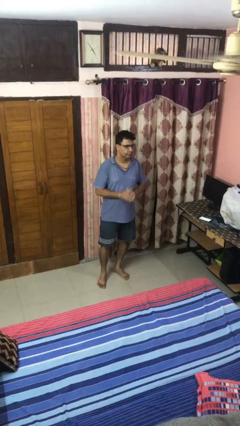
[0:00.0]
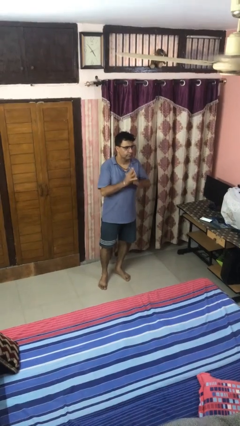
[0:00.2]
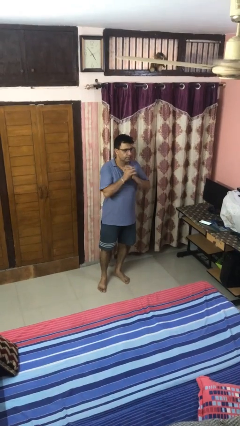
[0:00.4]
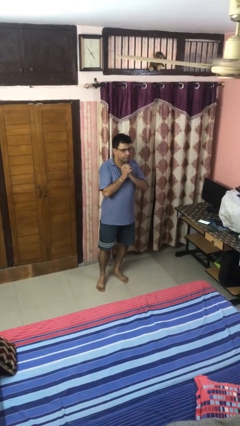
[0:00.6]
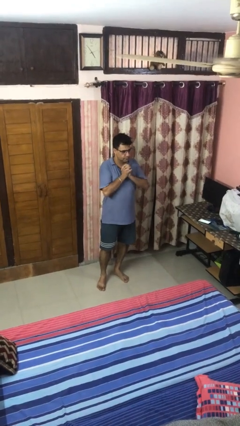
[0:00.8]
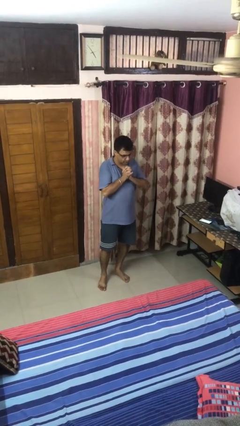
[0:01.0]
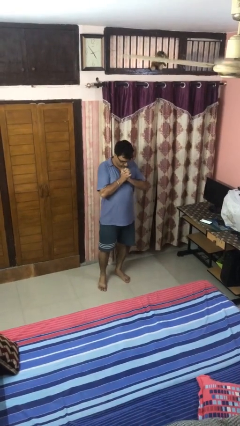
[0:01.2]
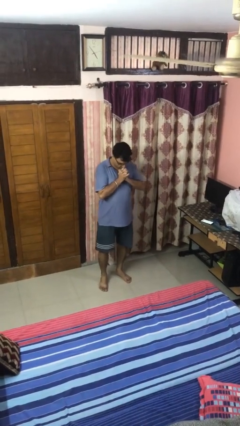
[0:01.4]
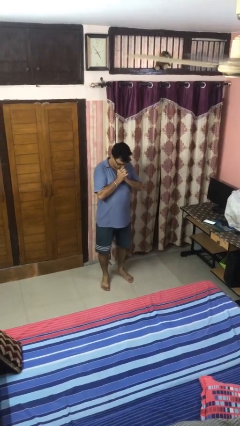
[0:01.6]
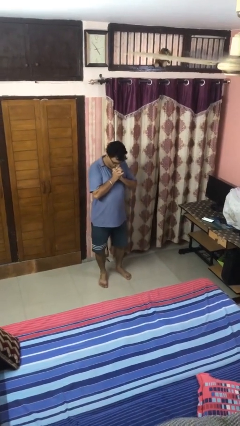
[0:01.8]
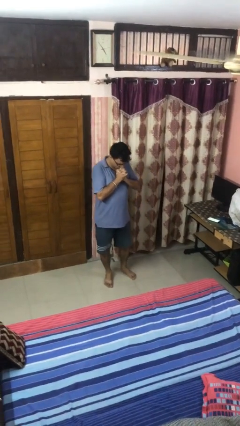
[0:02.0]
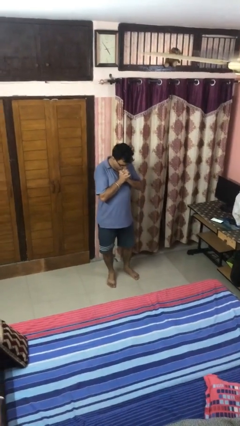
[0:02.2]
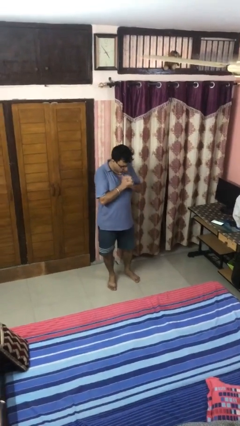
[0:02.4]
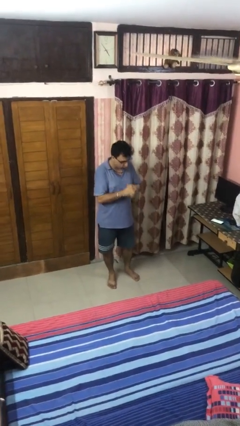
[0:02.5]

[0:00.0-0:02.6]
person prays

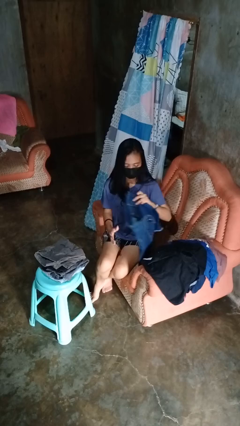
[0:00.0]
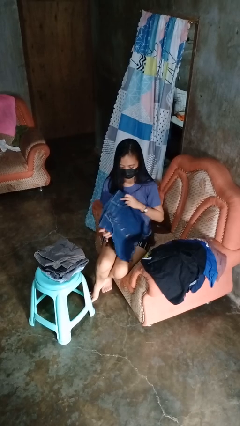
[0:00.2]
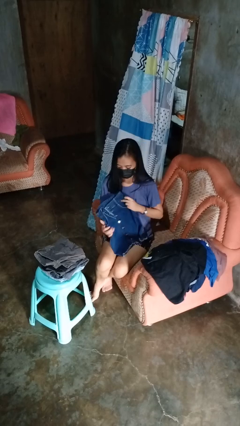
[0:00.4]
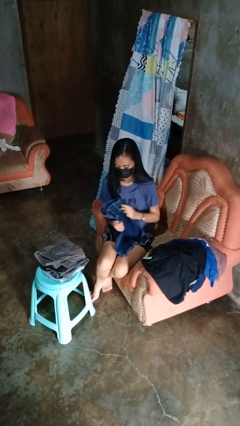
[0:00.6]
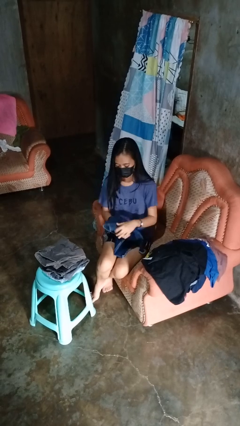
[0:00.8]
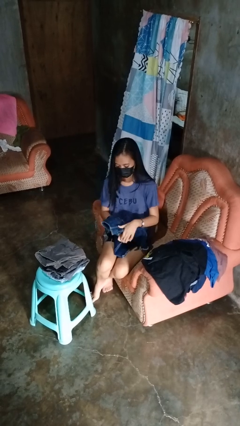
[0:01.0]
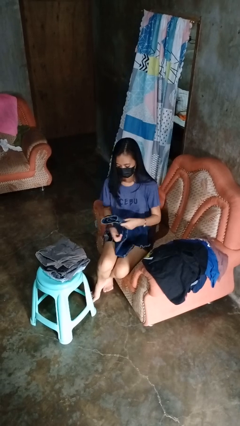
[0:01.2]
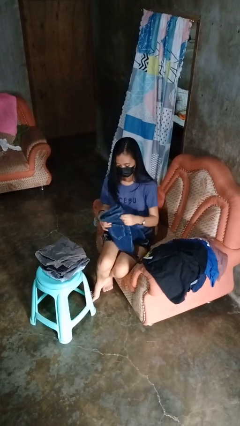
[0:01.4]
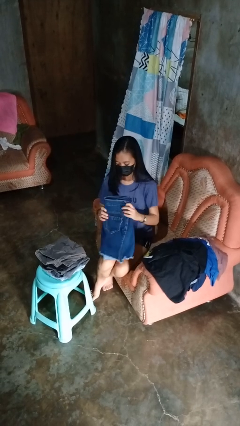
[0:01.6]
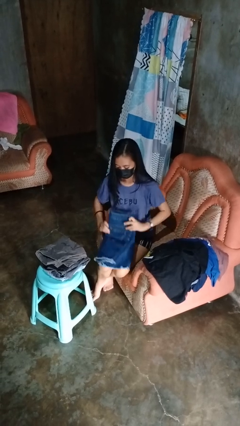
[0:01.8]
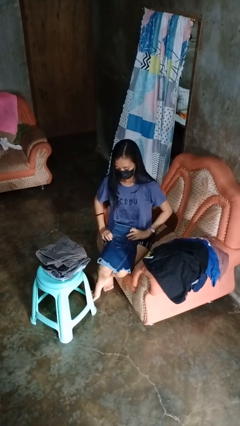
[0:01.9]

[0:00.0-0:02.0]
person folds pants

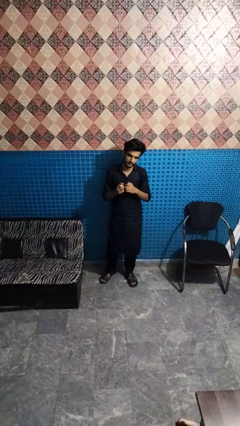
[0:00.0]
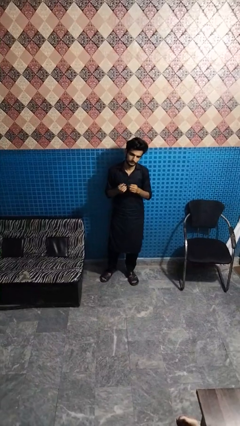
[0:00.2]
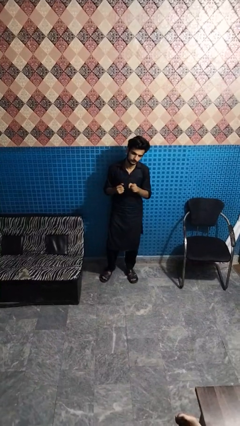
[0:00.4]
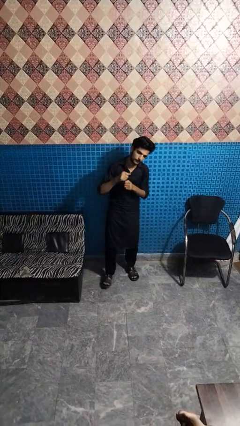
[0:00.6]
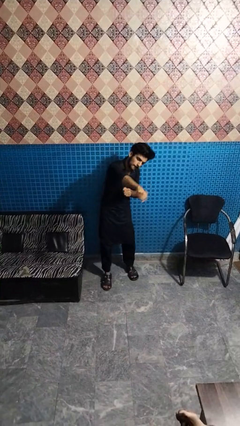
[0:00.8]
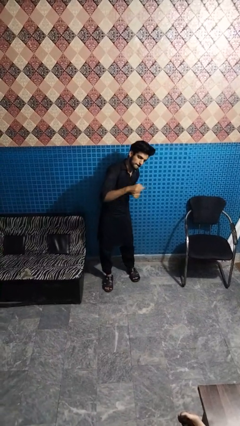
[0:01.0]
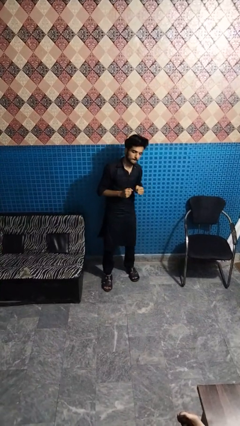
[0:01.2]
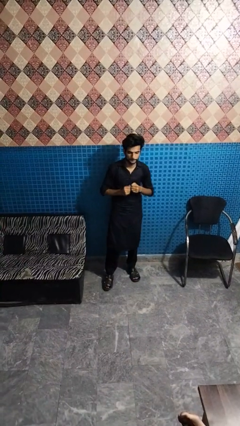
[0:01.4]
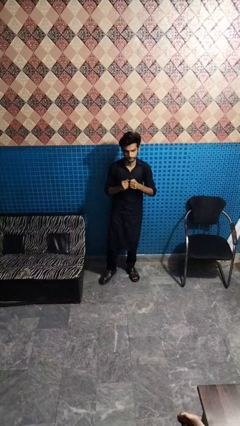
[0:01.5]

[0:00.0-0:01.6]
person punches

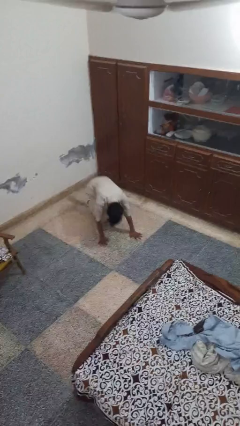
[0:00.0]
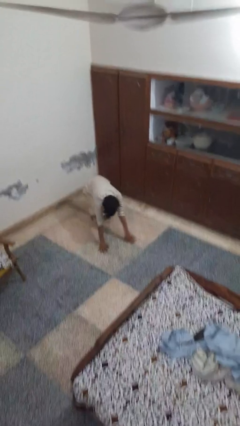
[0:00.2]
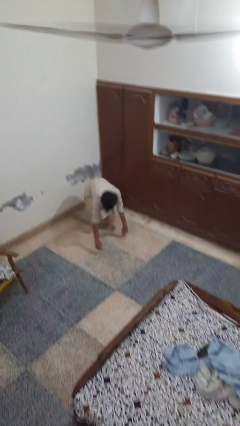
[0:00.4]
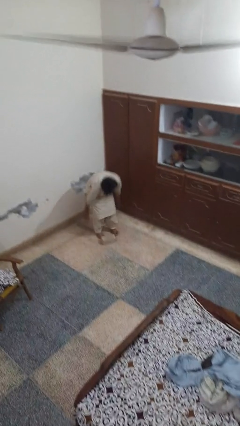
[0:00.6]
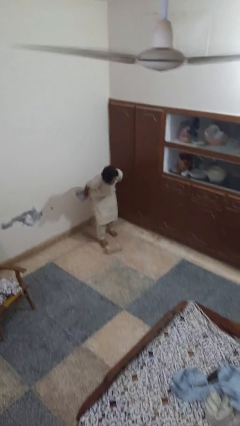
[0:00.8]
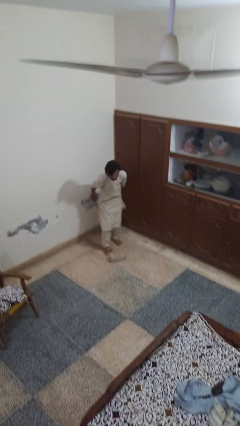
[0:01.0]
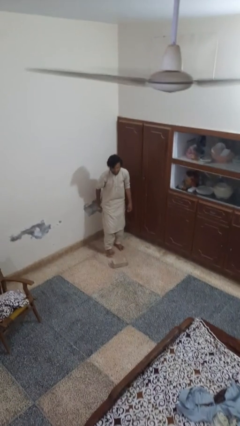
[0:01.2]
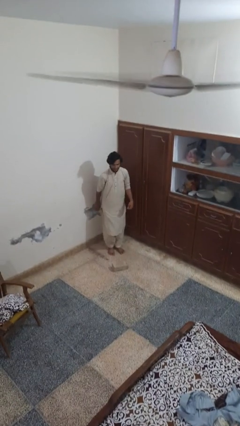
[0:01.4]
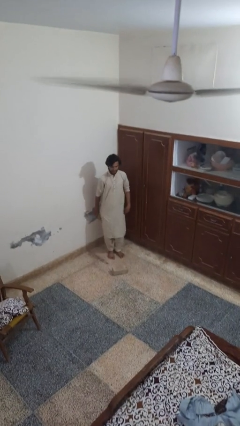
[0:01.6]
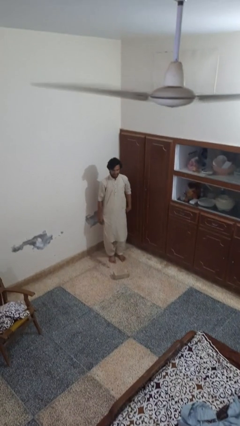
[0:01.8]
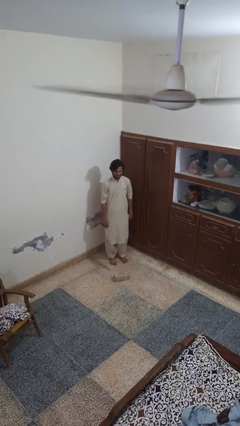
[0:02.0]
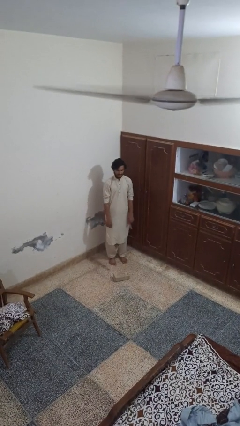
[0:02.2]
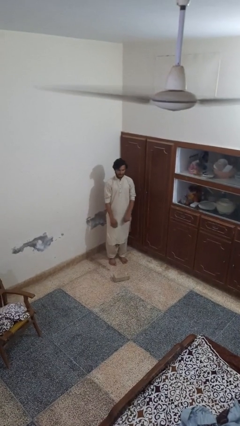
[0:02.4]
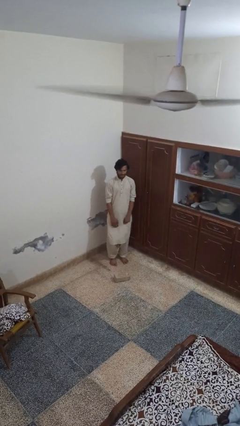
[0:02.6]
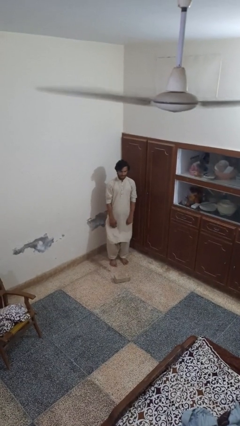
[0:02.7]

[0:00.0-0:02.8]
person stands up from floor

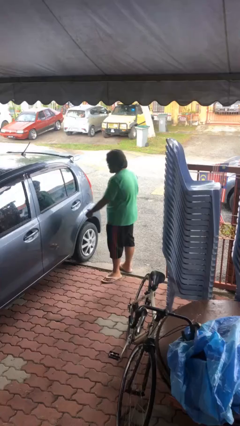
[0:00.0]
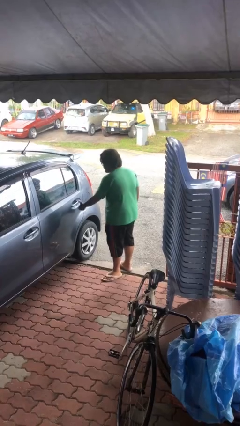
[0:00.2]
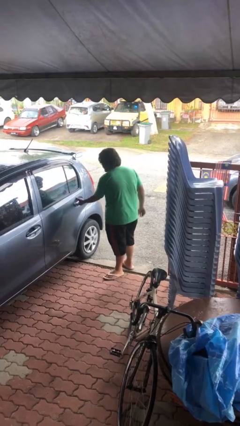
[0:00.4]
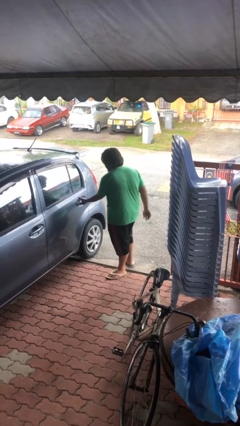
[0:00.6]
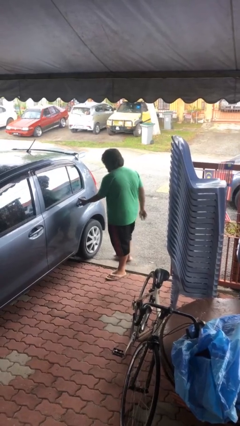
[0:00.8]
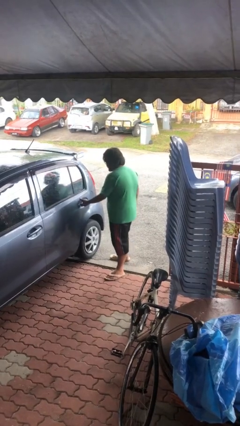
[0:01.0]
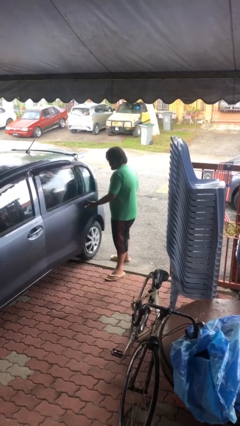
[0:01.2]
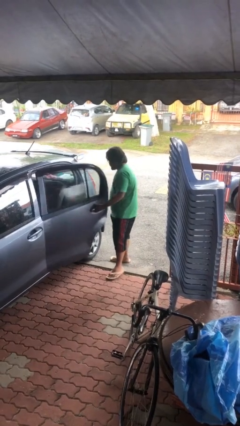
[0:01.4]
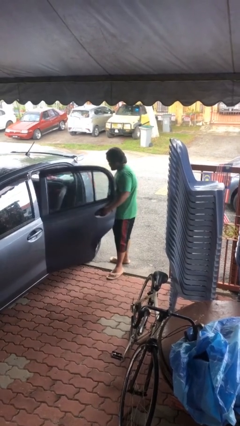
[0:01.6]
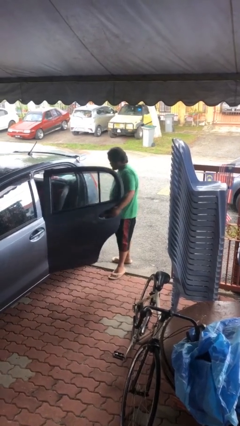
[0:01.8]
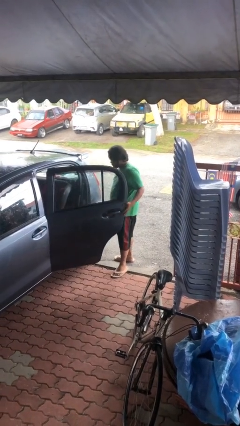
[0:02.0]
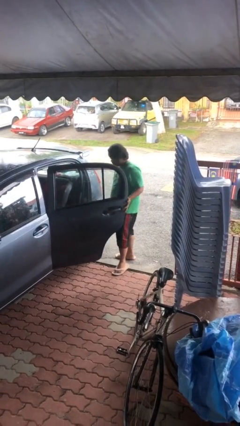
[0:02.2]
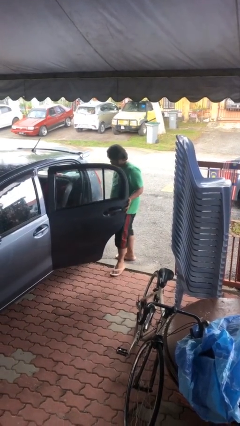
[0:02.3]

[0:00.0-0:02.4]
person opens car door

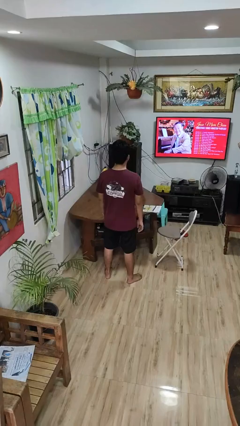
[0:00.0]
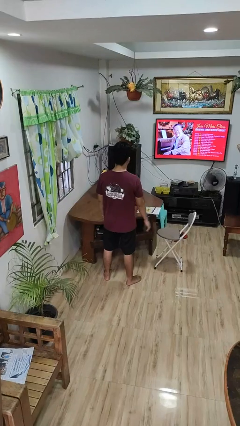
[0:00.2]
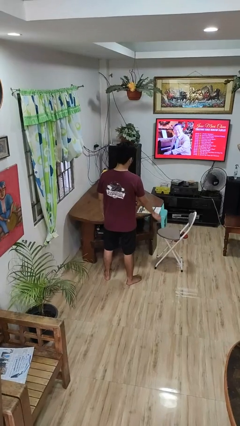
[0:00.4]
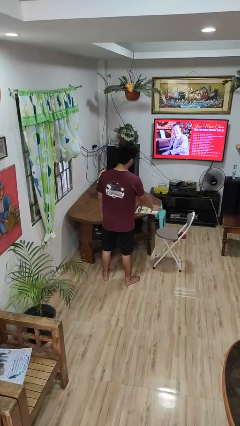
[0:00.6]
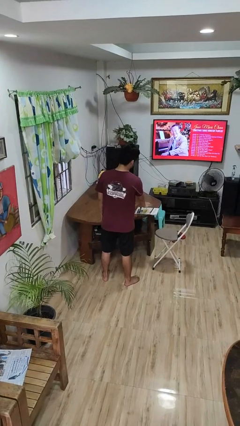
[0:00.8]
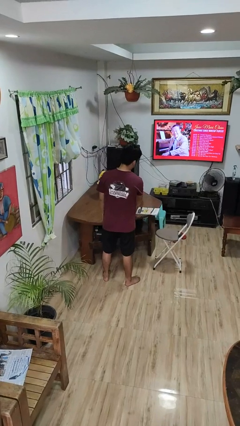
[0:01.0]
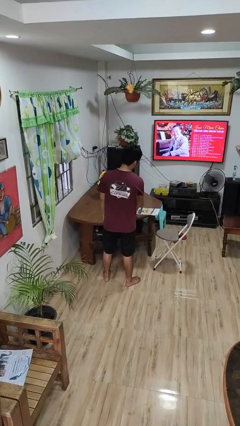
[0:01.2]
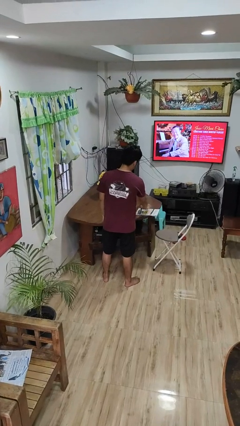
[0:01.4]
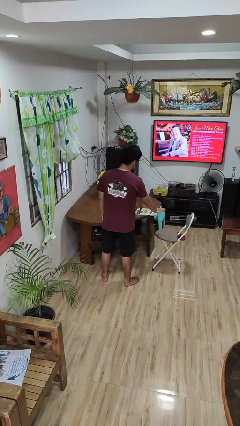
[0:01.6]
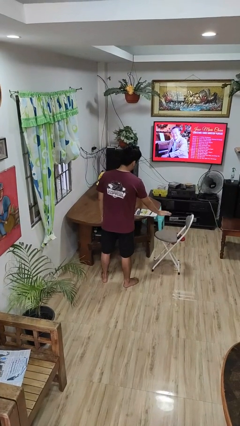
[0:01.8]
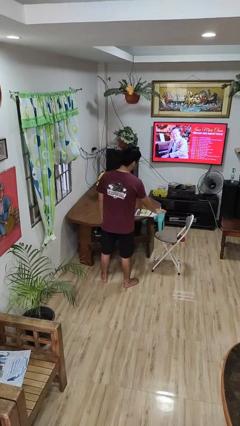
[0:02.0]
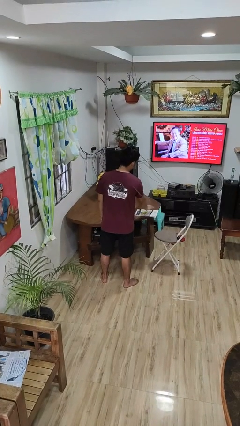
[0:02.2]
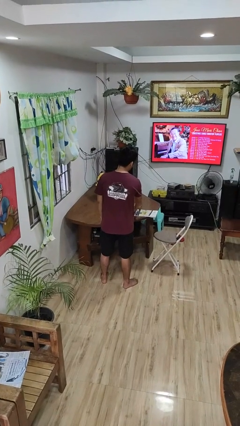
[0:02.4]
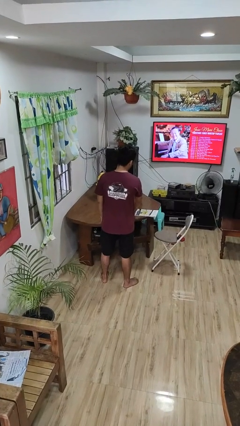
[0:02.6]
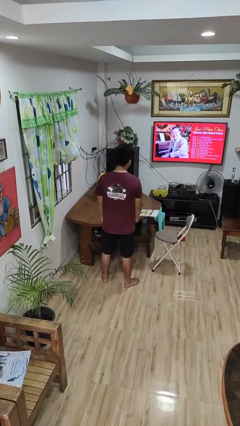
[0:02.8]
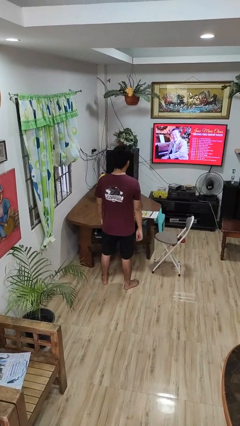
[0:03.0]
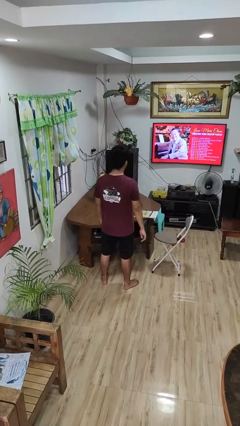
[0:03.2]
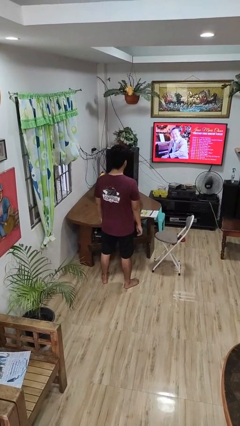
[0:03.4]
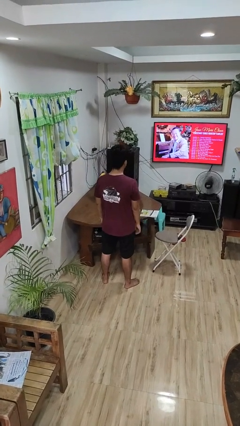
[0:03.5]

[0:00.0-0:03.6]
person waves hand over object

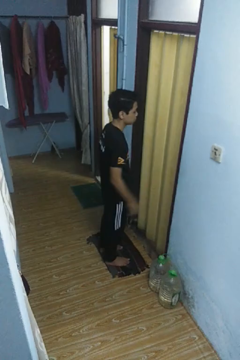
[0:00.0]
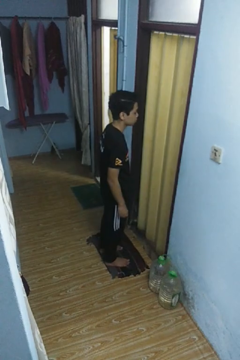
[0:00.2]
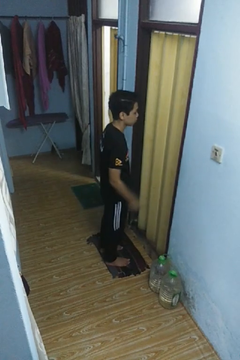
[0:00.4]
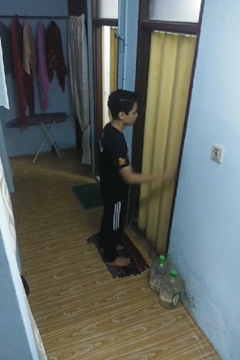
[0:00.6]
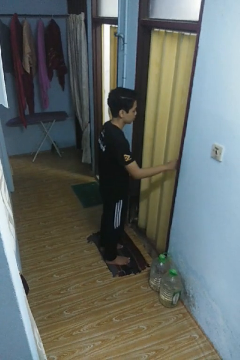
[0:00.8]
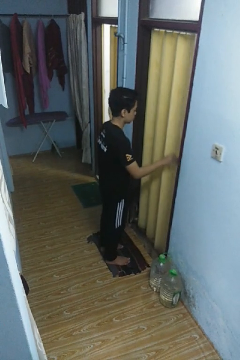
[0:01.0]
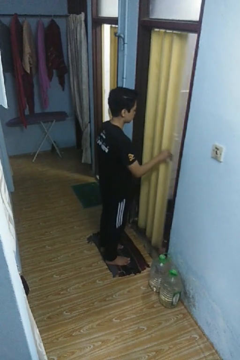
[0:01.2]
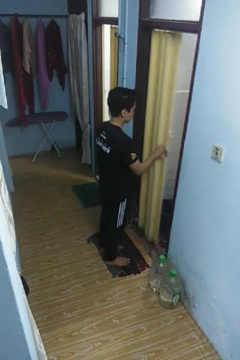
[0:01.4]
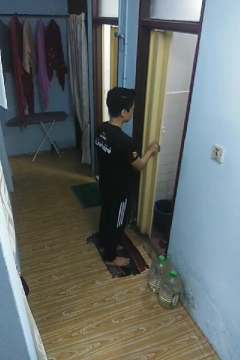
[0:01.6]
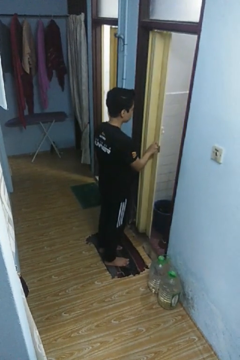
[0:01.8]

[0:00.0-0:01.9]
person opens sliding door

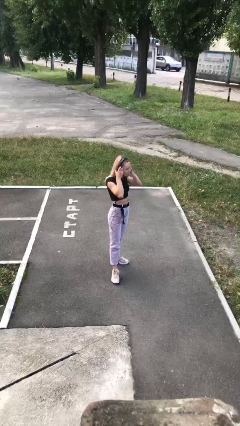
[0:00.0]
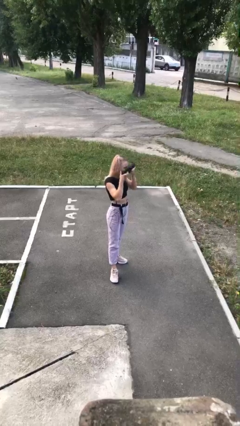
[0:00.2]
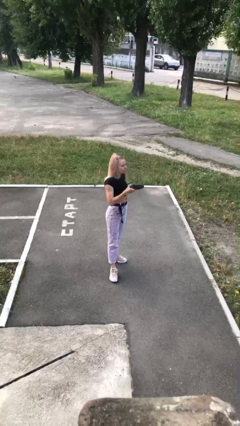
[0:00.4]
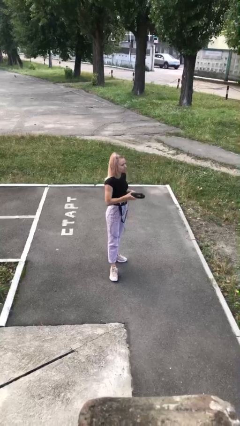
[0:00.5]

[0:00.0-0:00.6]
person takes off headphones
